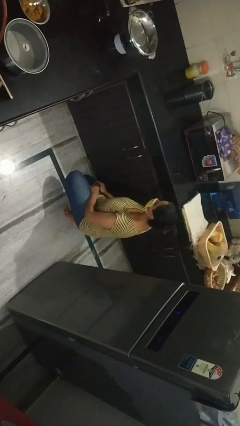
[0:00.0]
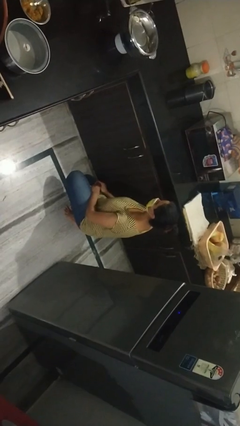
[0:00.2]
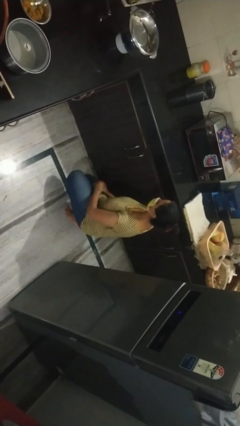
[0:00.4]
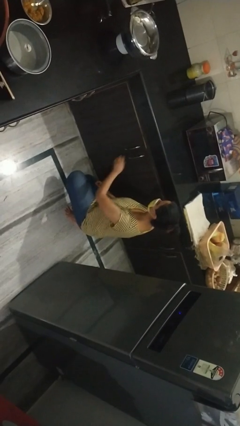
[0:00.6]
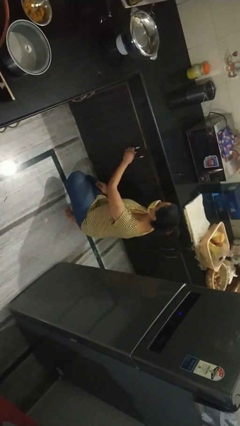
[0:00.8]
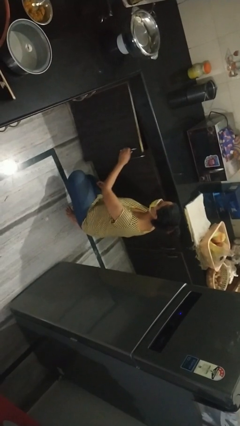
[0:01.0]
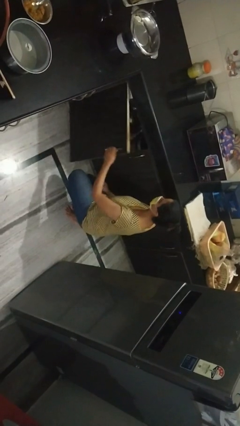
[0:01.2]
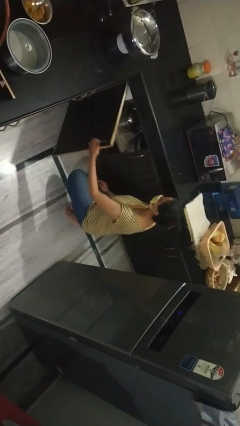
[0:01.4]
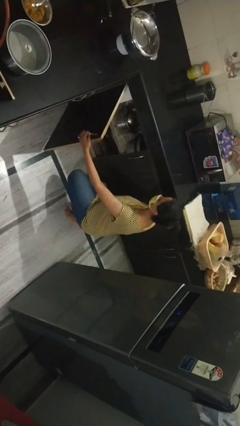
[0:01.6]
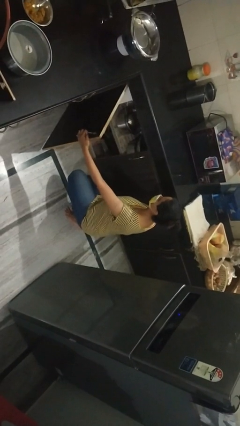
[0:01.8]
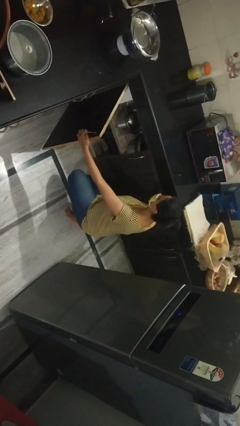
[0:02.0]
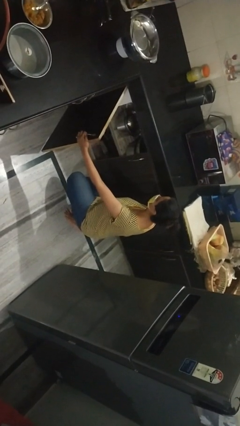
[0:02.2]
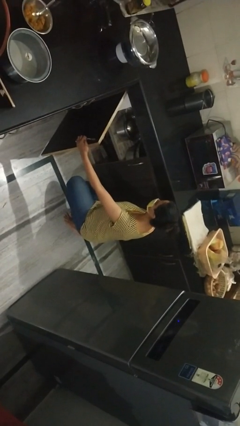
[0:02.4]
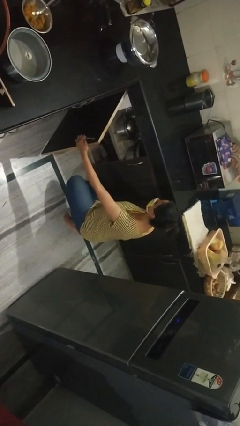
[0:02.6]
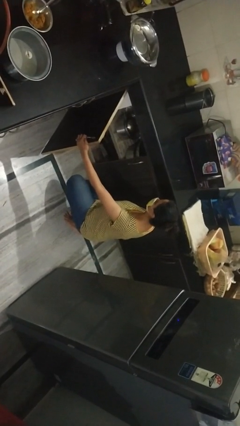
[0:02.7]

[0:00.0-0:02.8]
person opens cabinet

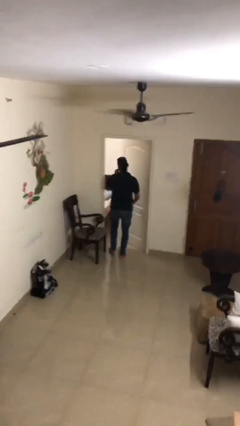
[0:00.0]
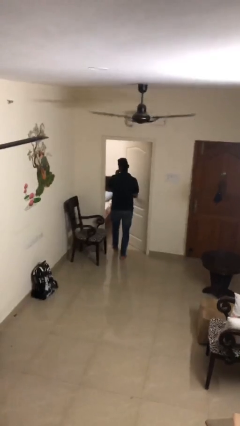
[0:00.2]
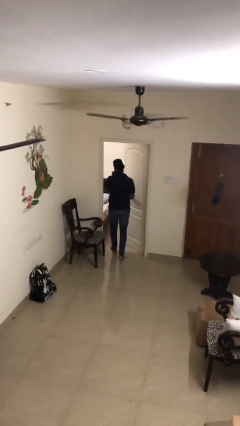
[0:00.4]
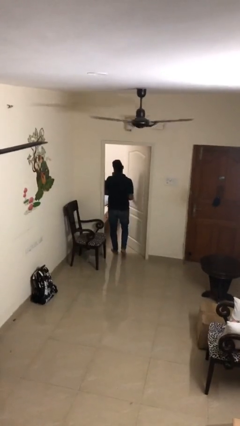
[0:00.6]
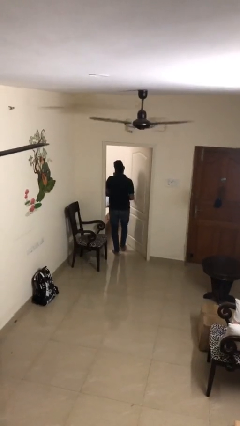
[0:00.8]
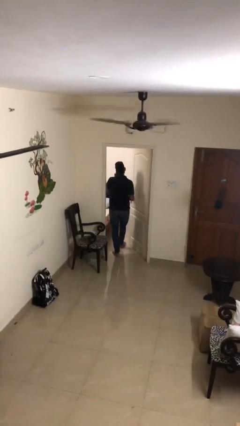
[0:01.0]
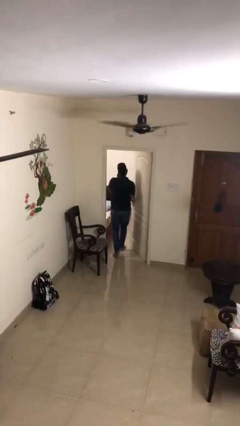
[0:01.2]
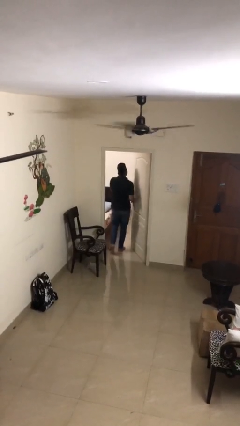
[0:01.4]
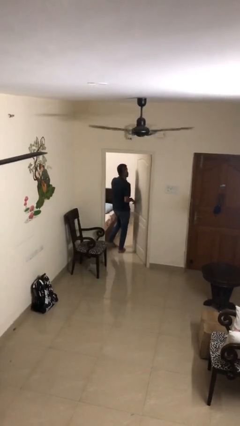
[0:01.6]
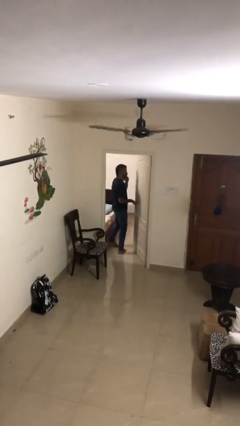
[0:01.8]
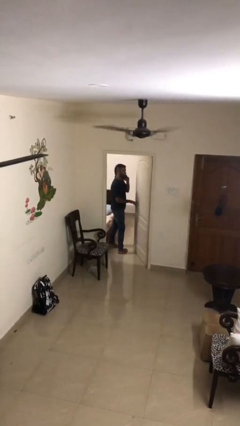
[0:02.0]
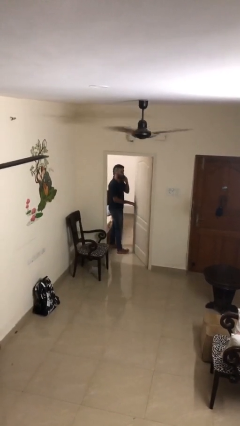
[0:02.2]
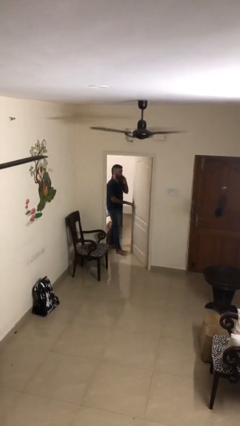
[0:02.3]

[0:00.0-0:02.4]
person exits scene through structure

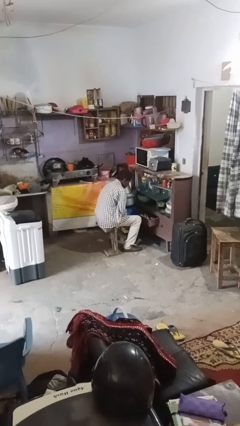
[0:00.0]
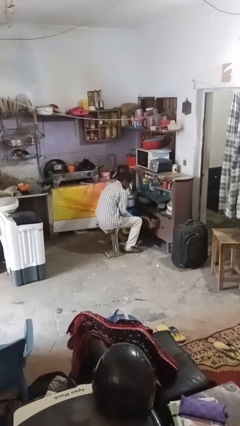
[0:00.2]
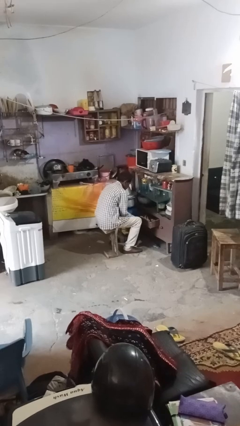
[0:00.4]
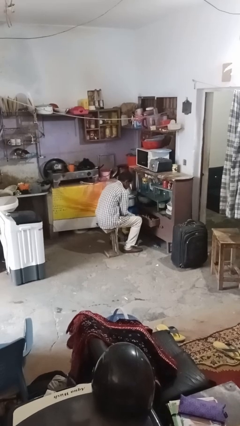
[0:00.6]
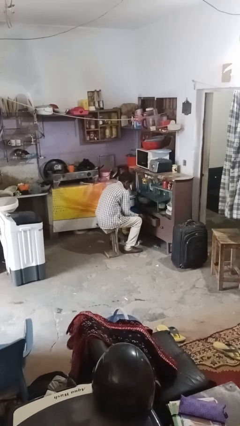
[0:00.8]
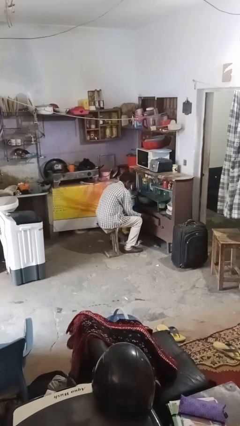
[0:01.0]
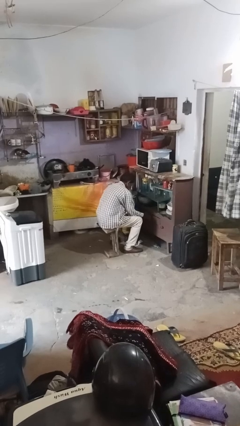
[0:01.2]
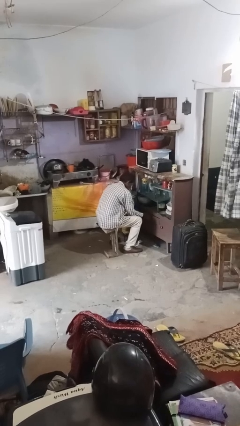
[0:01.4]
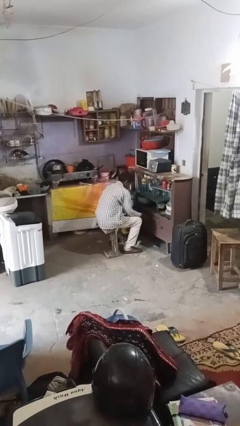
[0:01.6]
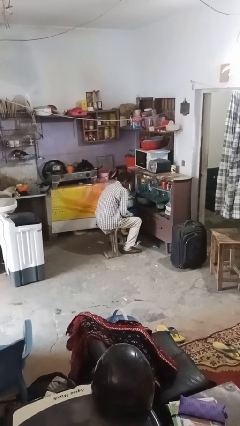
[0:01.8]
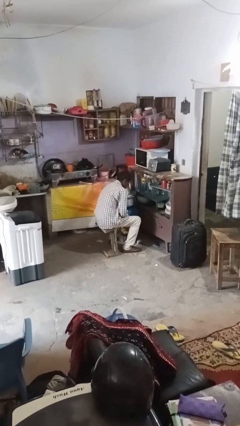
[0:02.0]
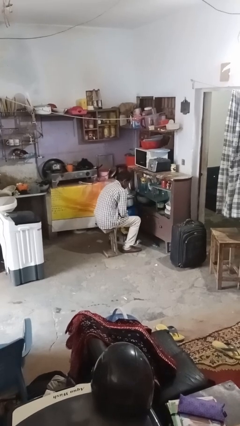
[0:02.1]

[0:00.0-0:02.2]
person closes kitchen drawer

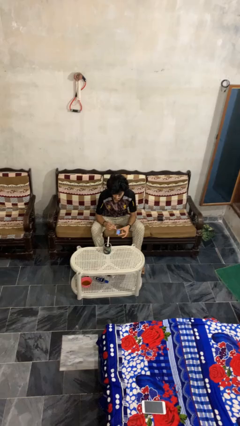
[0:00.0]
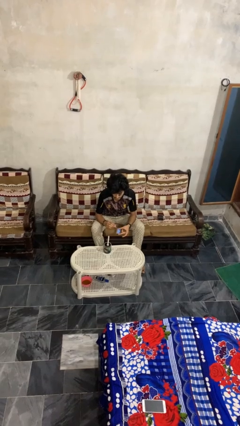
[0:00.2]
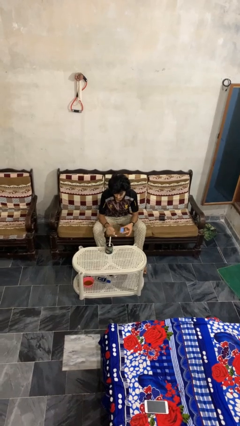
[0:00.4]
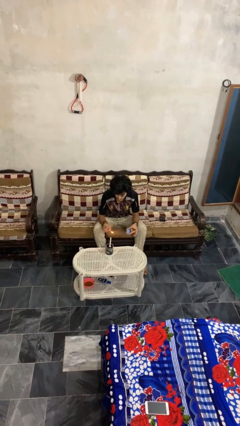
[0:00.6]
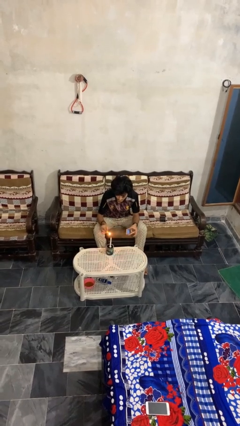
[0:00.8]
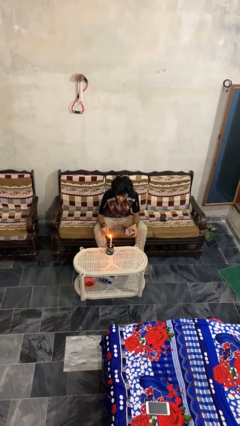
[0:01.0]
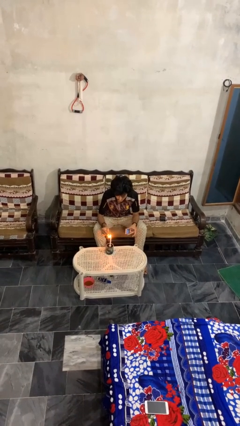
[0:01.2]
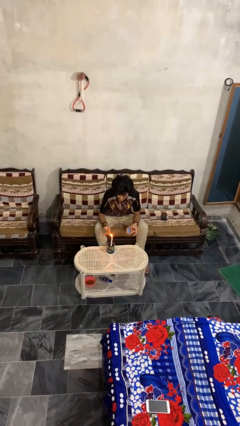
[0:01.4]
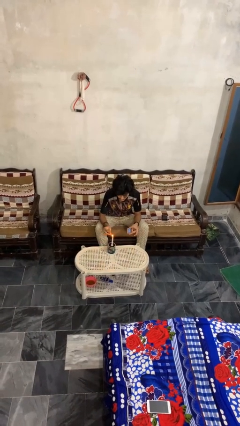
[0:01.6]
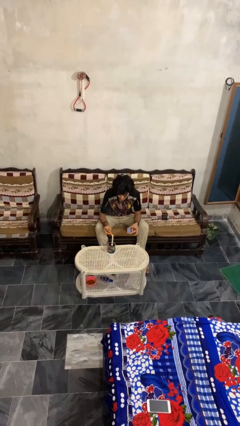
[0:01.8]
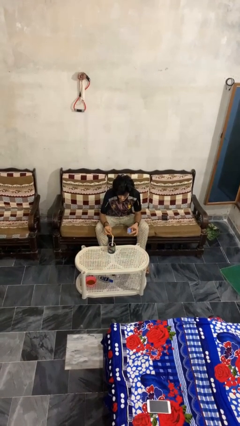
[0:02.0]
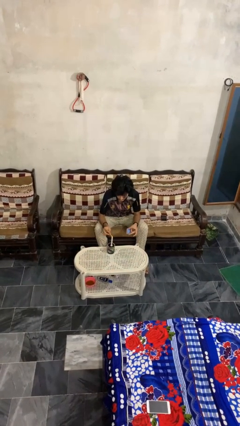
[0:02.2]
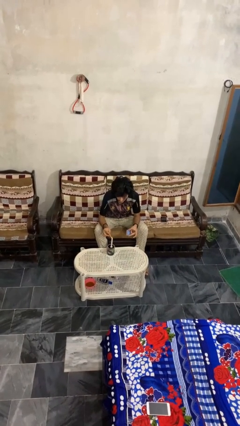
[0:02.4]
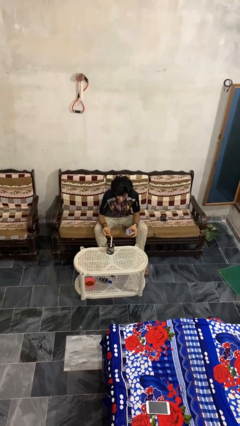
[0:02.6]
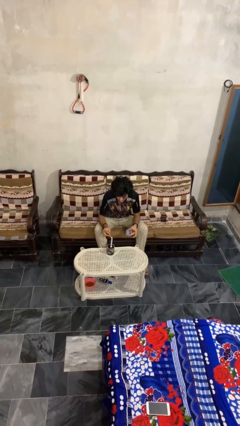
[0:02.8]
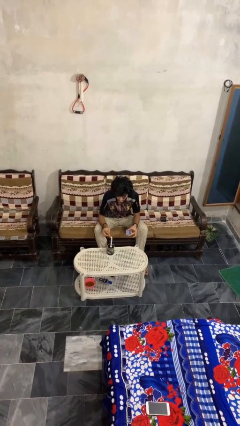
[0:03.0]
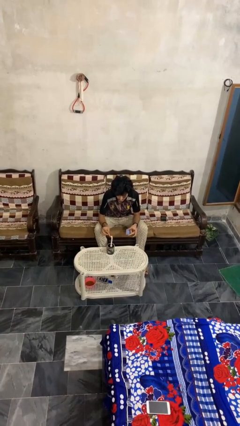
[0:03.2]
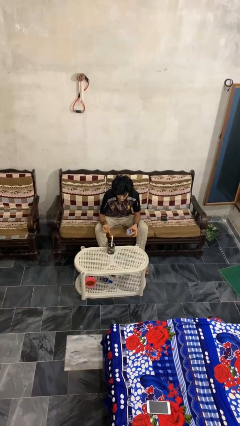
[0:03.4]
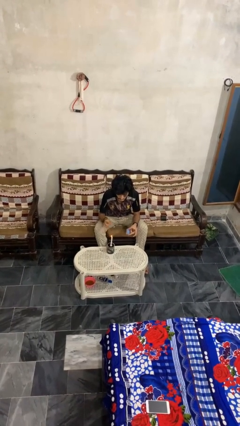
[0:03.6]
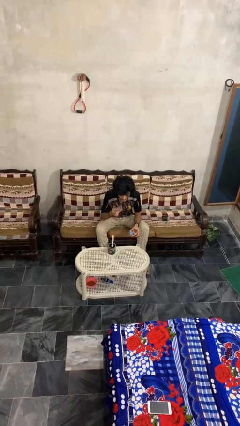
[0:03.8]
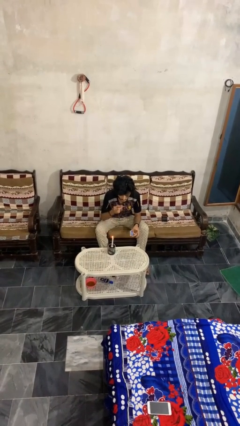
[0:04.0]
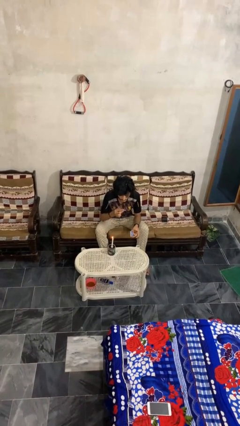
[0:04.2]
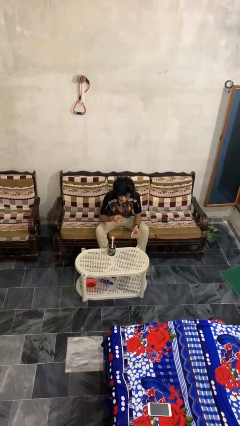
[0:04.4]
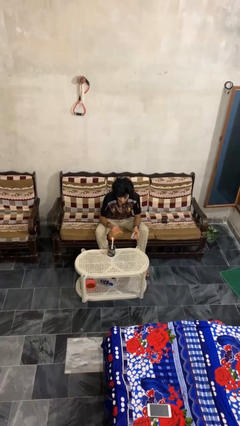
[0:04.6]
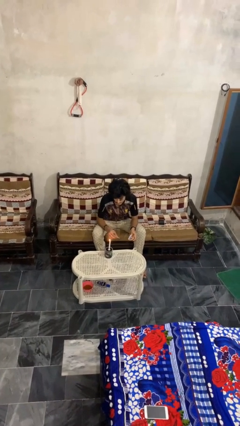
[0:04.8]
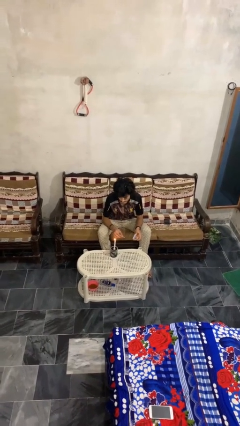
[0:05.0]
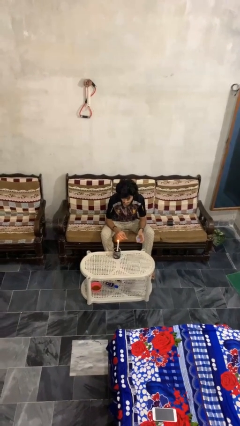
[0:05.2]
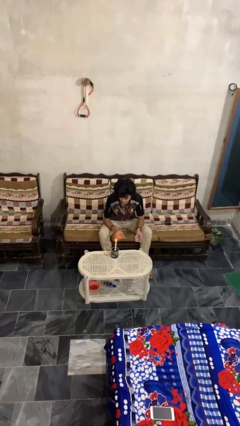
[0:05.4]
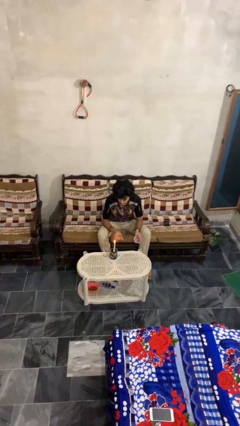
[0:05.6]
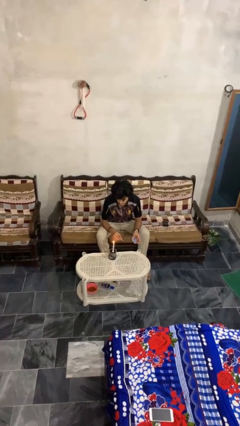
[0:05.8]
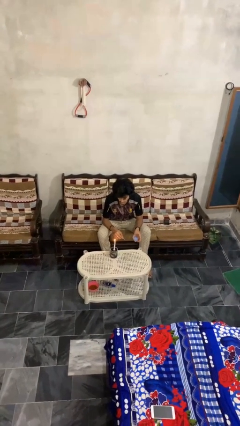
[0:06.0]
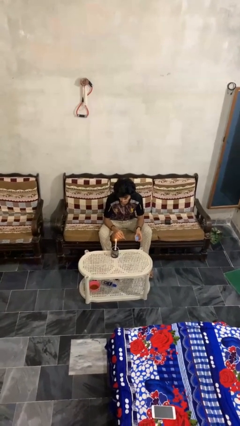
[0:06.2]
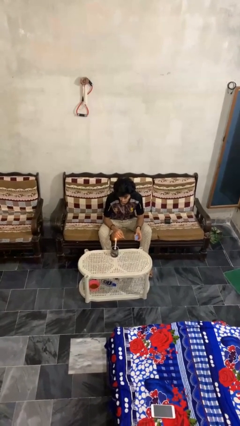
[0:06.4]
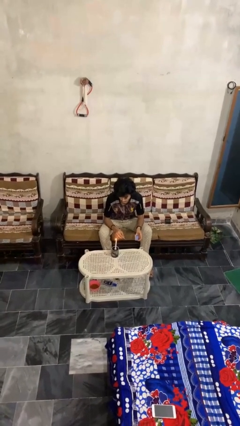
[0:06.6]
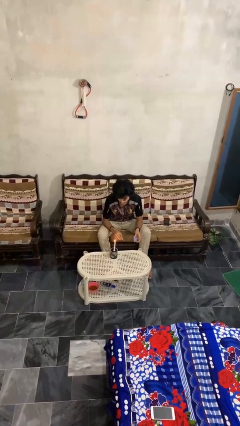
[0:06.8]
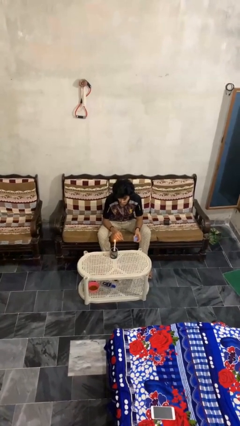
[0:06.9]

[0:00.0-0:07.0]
person lights candle

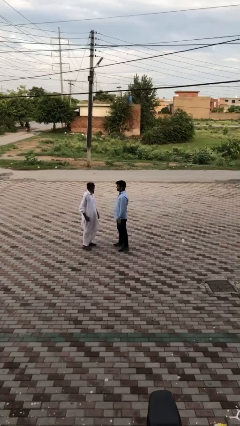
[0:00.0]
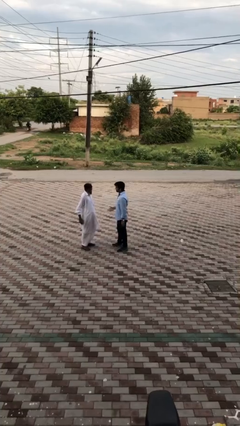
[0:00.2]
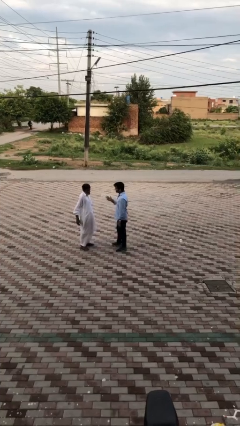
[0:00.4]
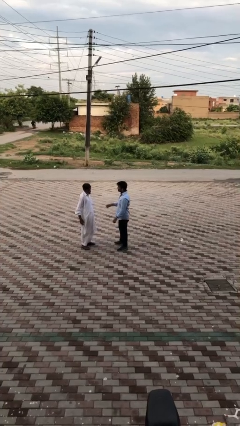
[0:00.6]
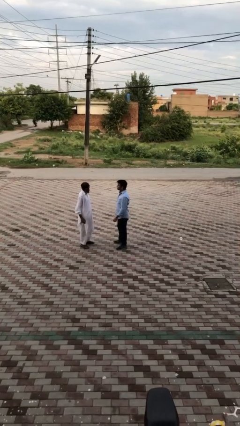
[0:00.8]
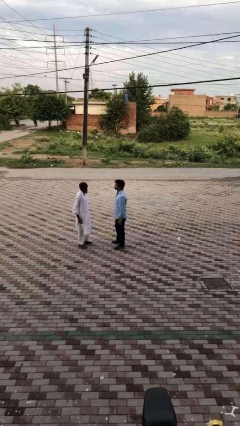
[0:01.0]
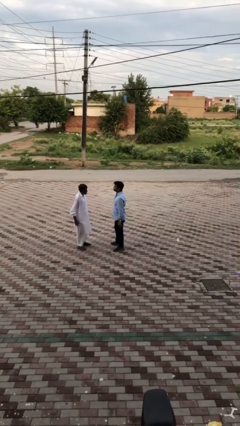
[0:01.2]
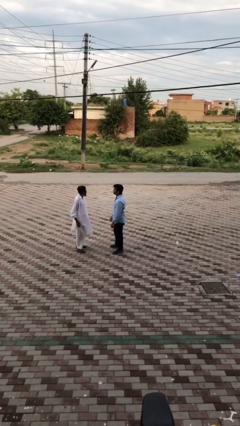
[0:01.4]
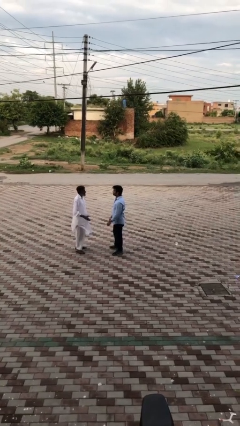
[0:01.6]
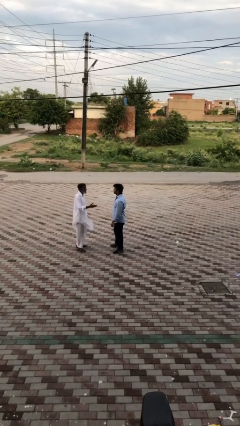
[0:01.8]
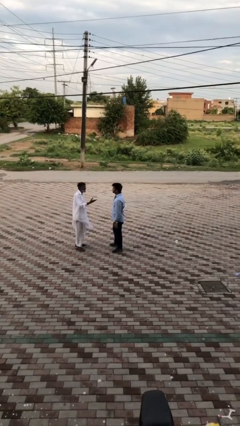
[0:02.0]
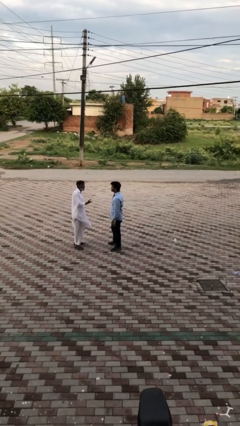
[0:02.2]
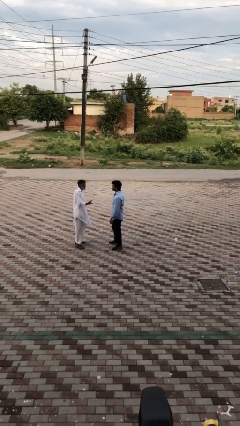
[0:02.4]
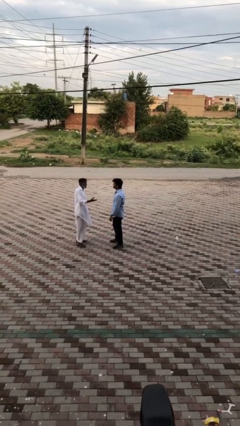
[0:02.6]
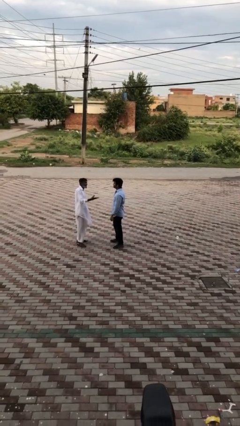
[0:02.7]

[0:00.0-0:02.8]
person talks to person

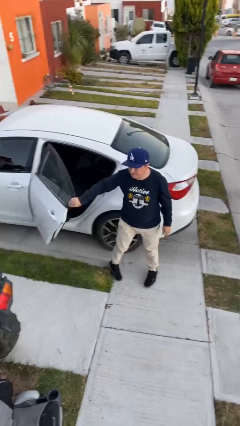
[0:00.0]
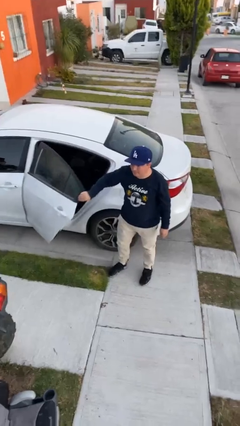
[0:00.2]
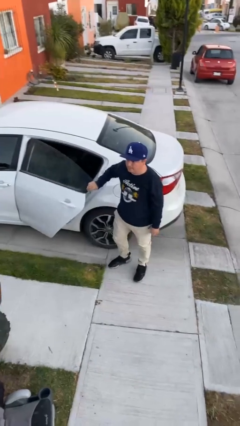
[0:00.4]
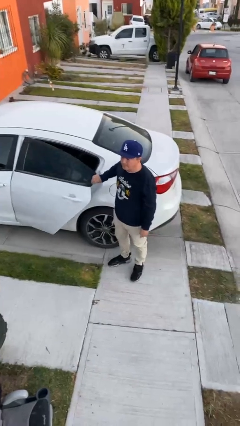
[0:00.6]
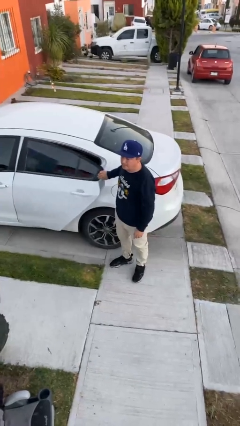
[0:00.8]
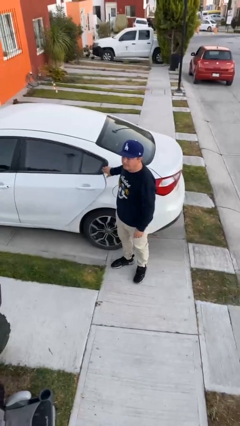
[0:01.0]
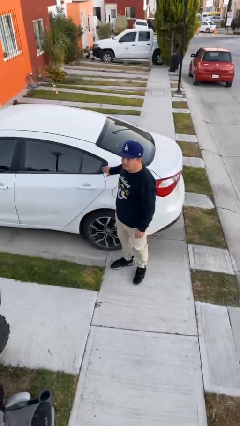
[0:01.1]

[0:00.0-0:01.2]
person closes car door
